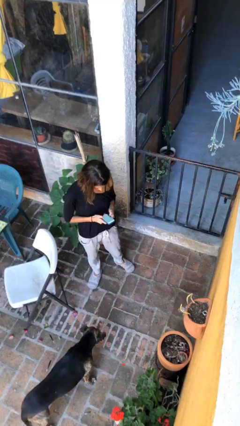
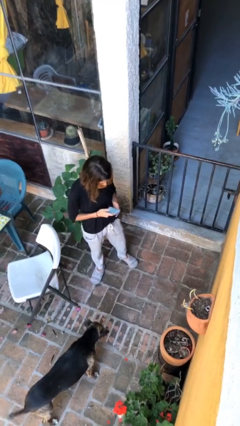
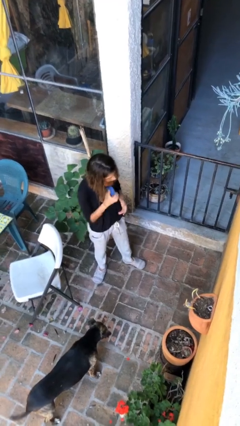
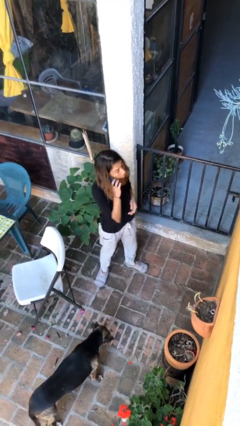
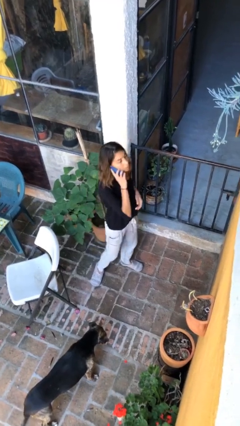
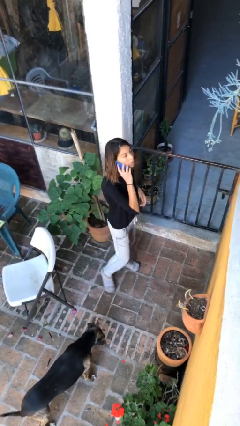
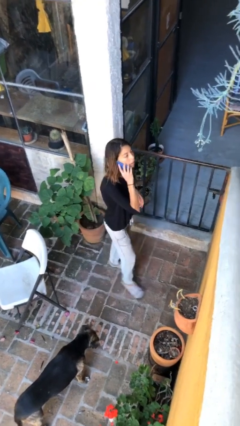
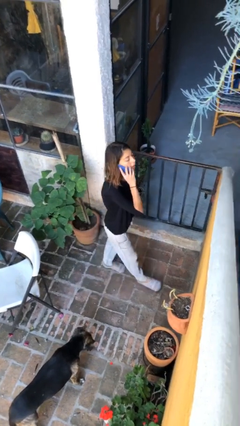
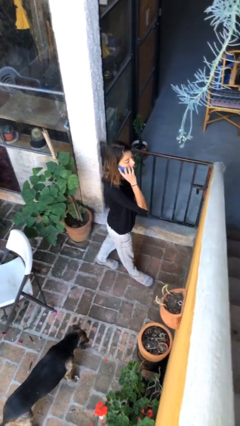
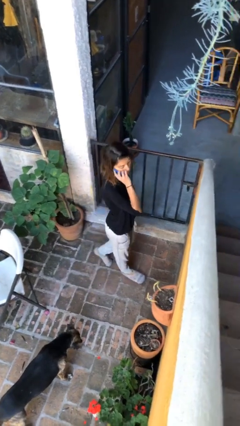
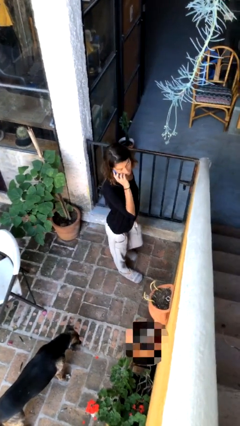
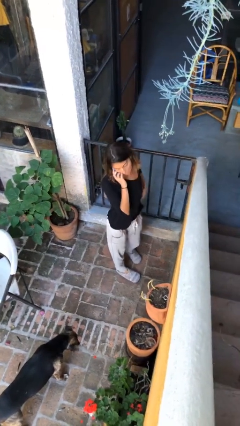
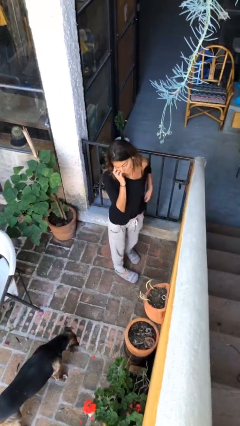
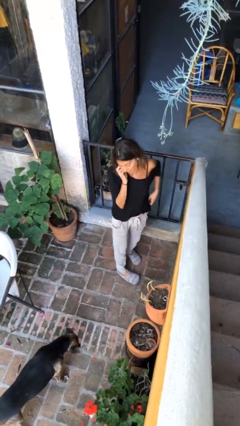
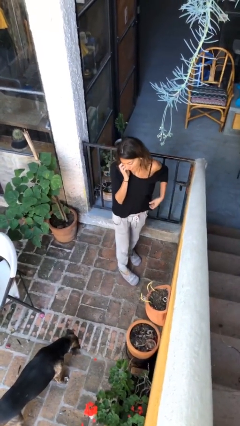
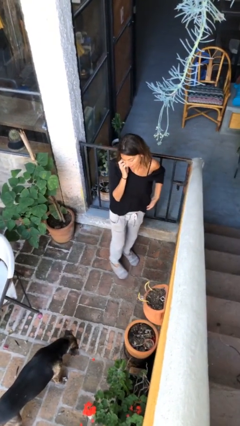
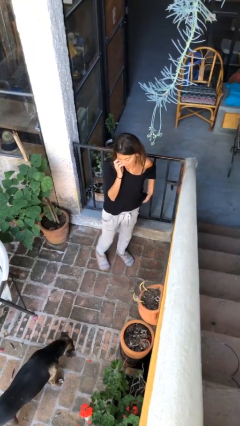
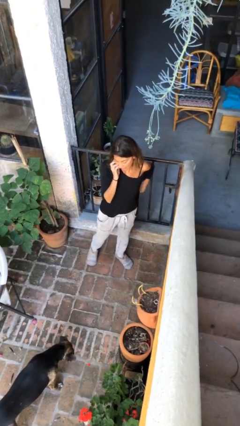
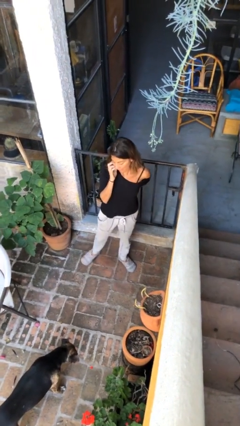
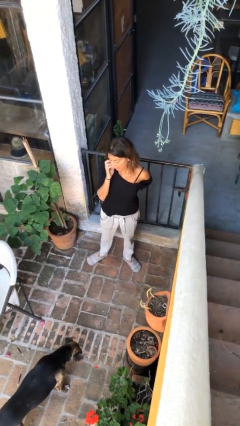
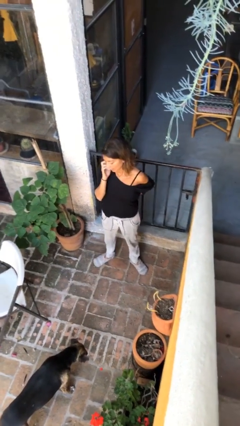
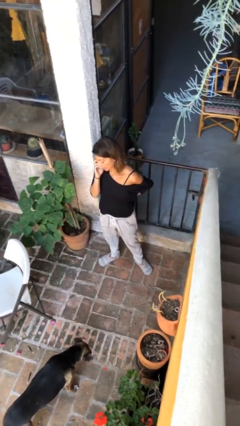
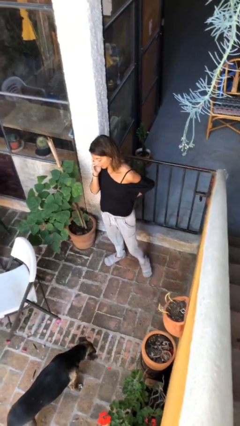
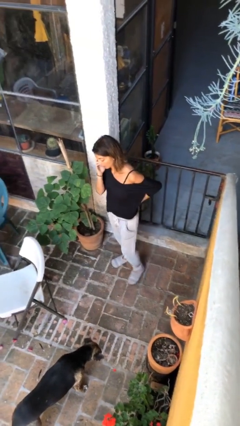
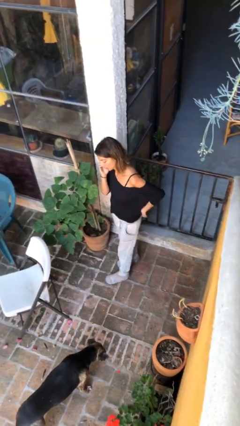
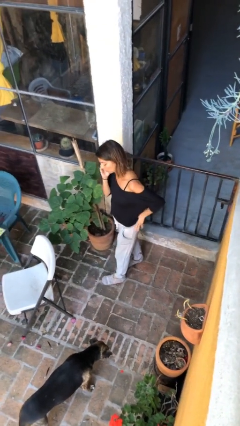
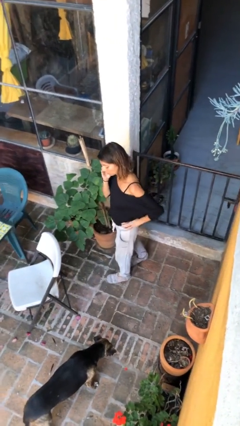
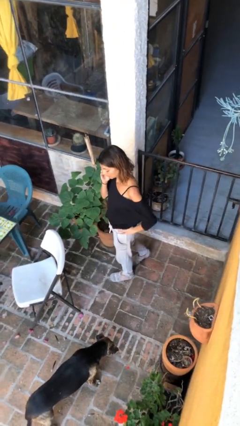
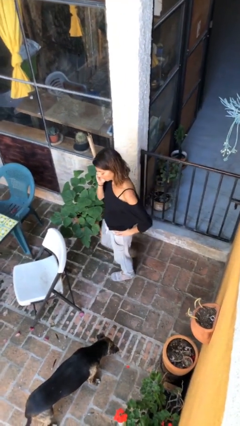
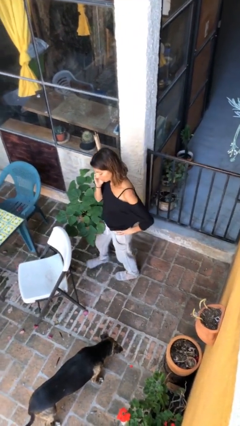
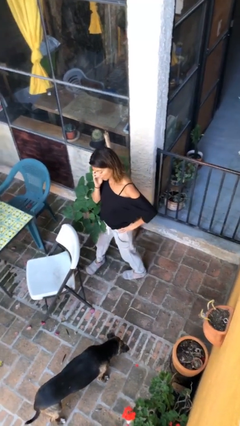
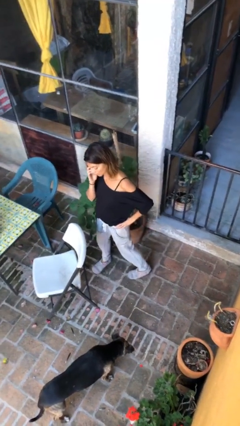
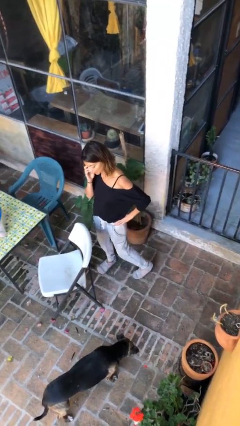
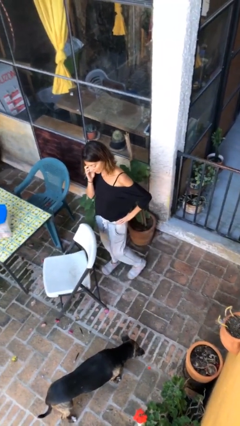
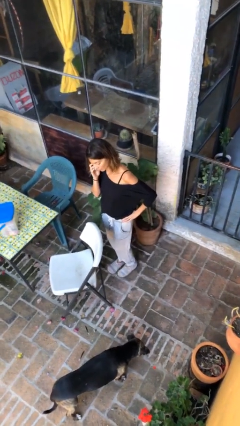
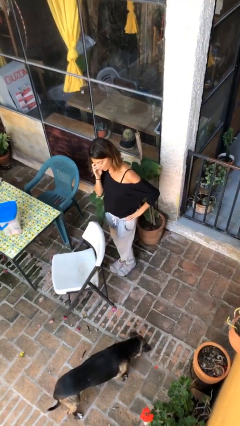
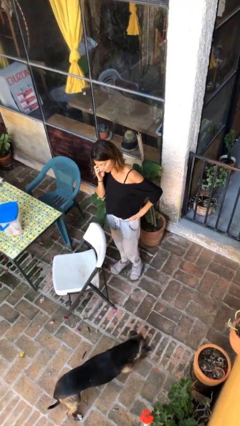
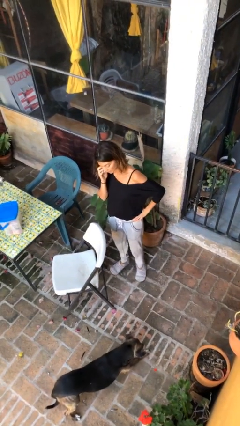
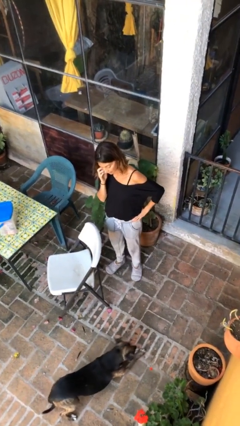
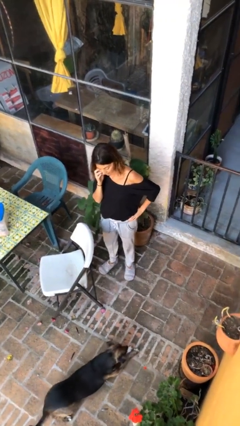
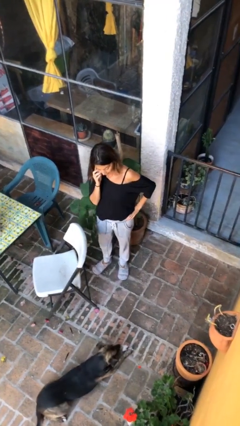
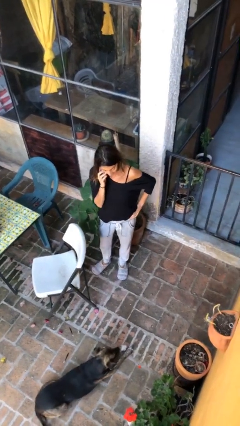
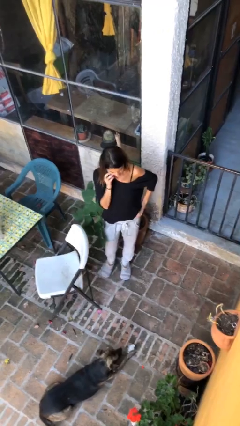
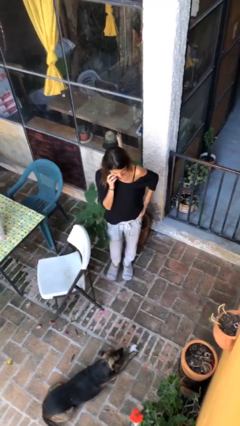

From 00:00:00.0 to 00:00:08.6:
person talks on phone

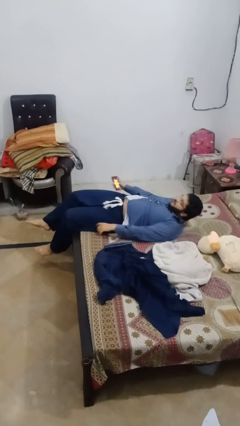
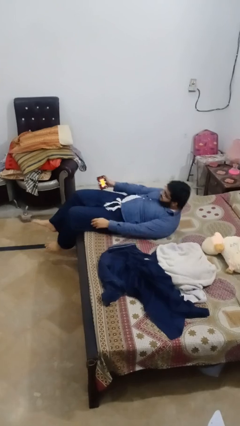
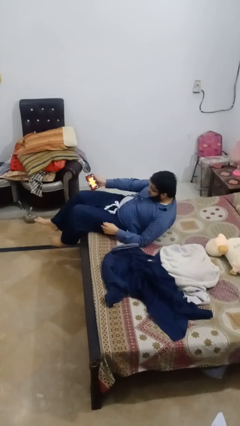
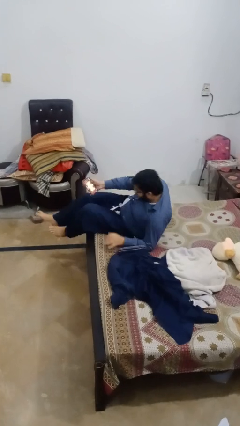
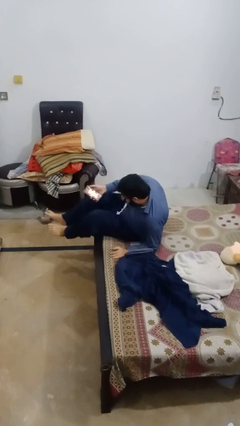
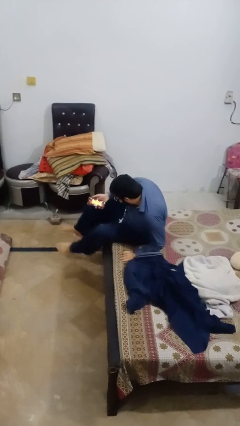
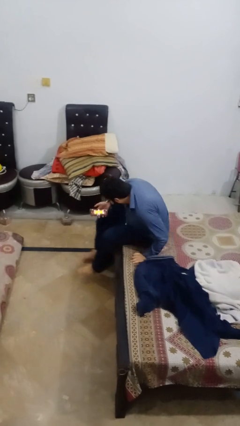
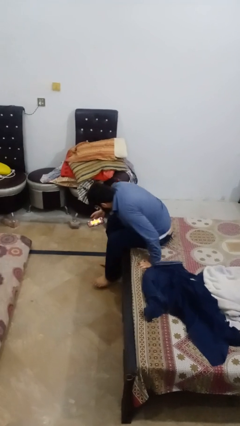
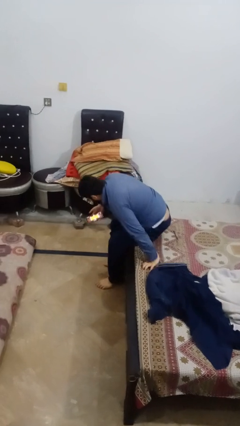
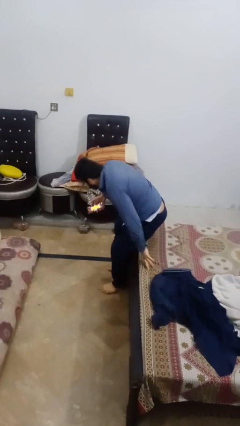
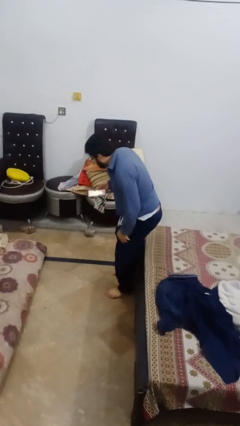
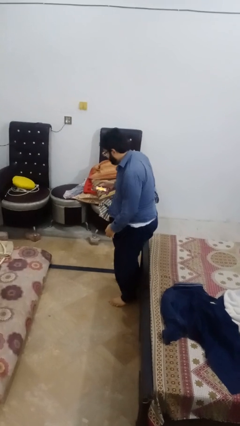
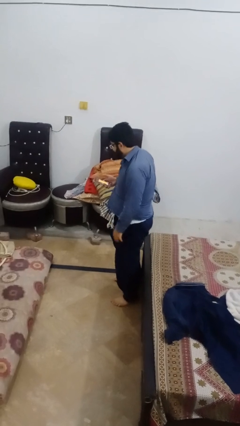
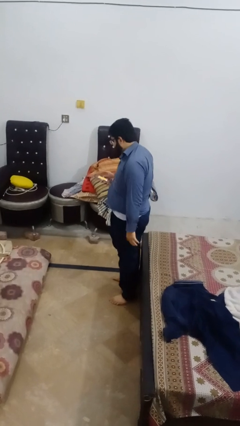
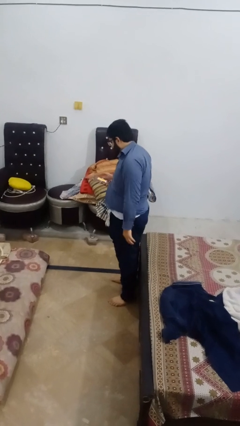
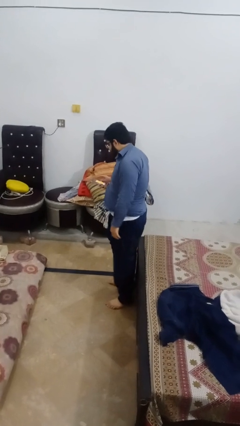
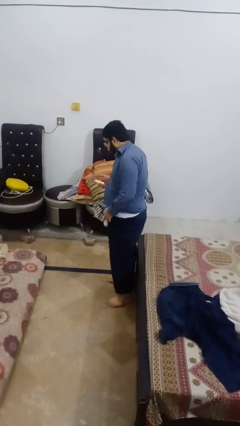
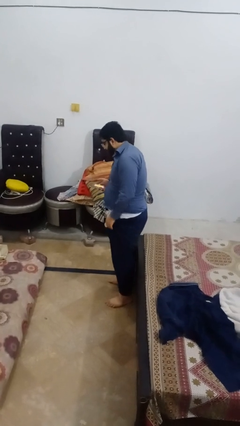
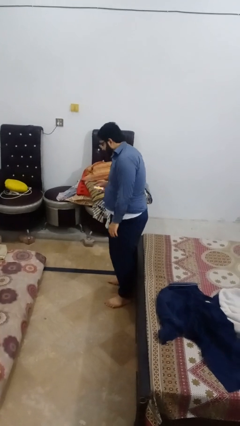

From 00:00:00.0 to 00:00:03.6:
person stands up

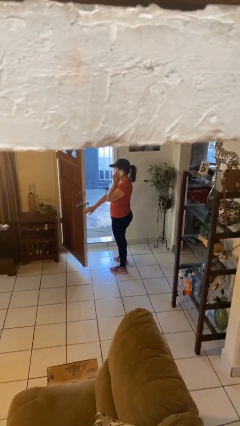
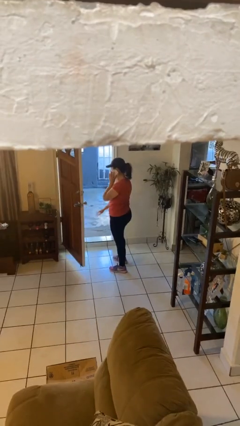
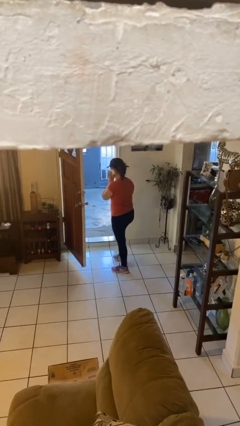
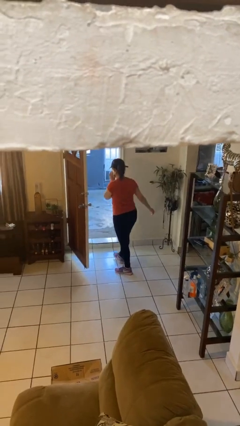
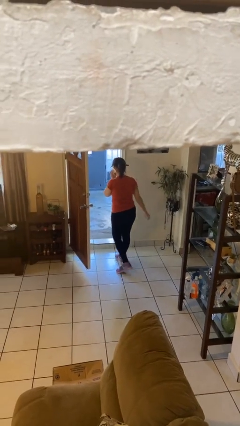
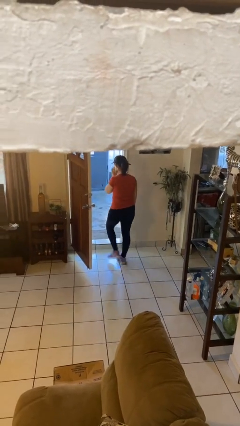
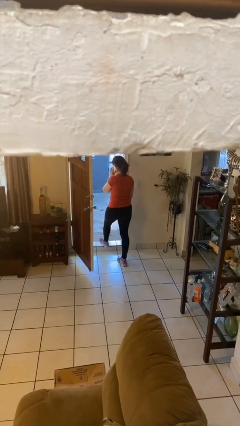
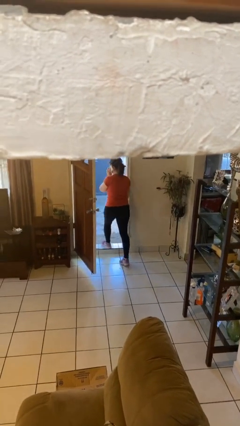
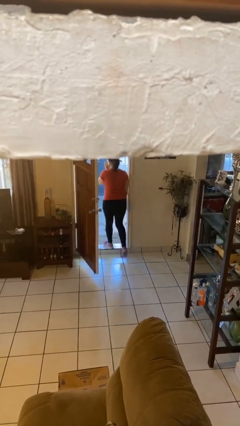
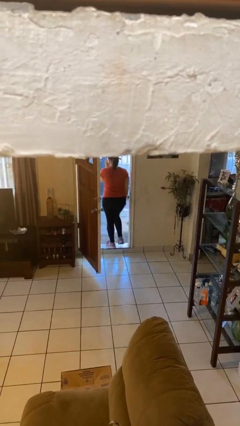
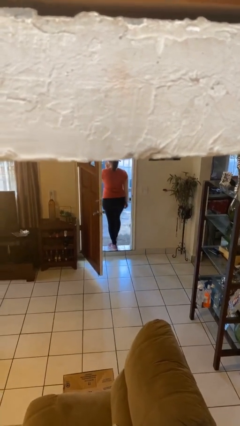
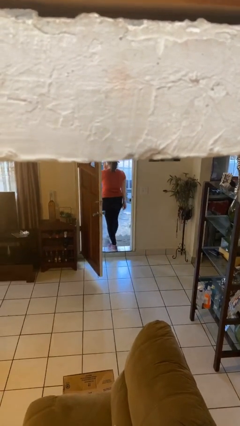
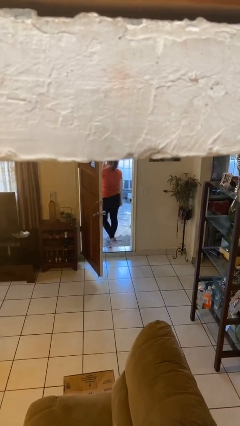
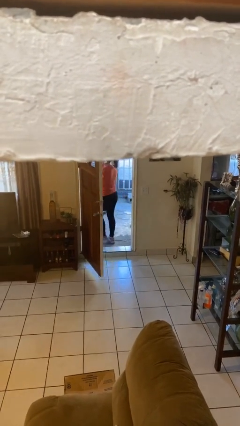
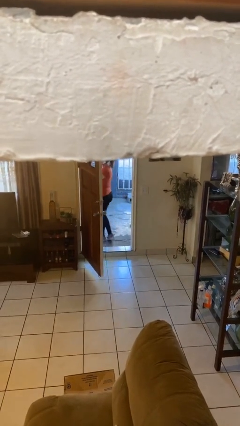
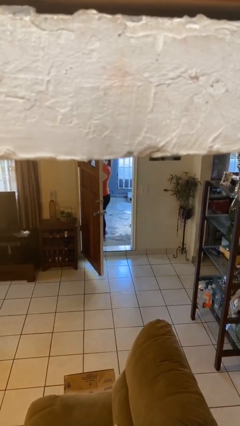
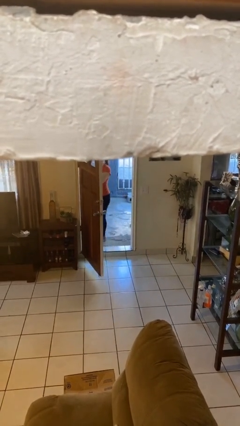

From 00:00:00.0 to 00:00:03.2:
person exits scene through structure

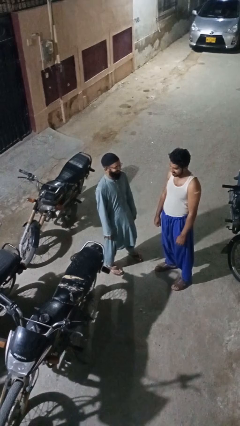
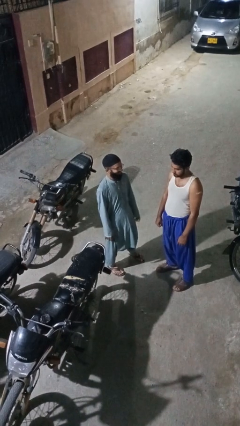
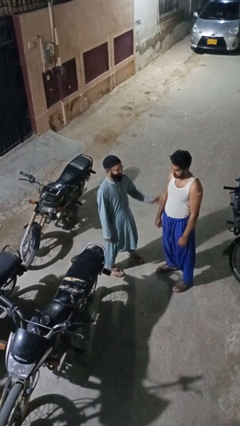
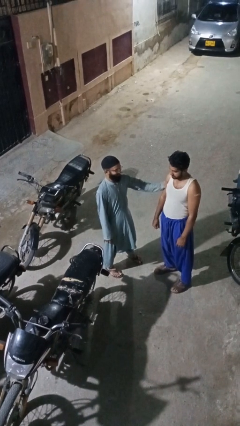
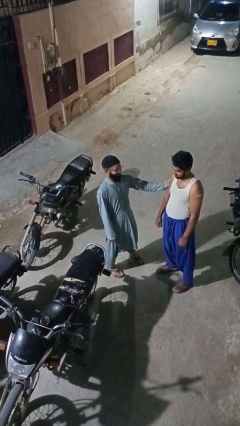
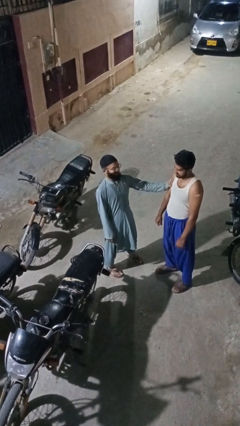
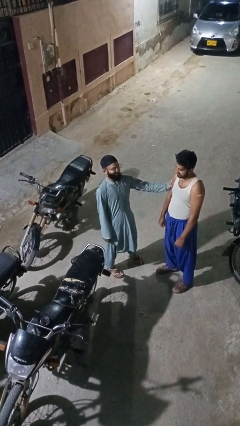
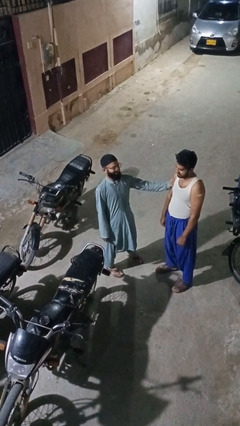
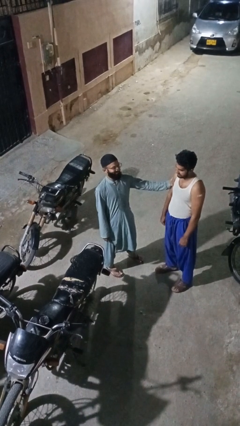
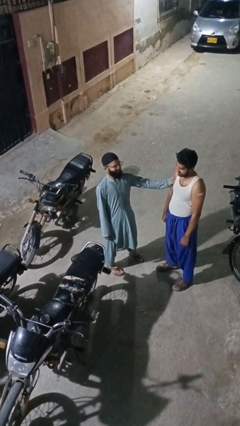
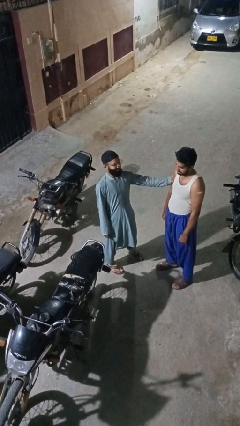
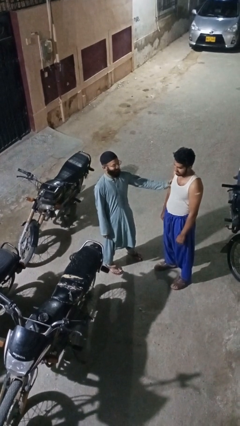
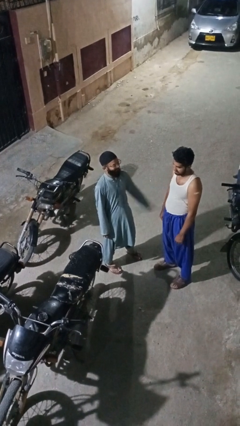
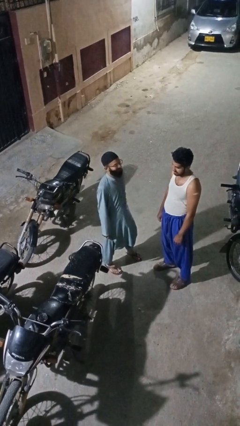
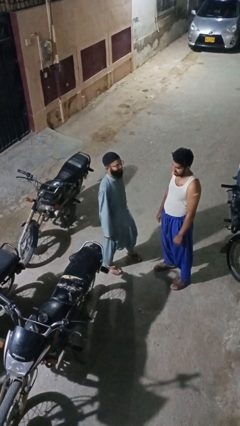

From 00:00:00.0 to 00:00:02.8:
person grabs person by bicep
